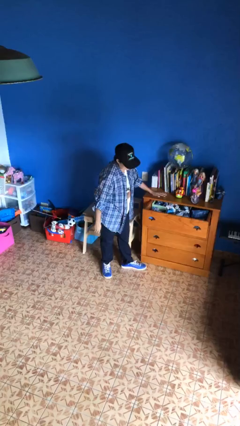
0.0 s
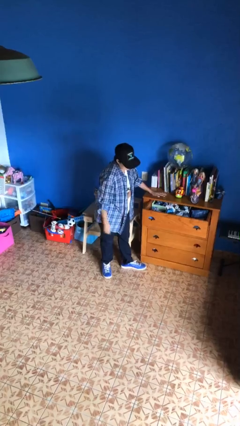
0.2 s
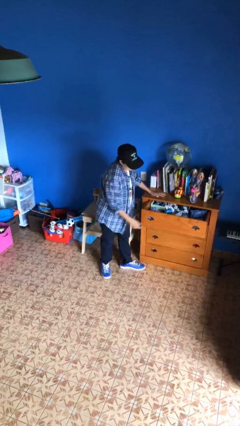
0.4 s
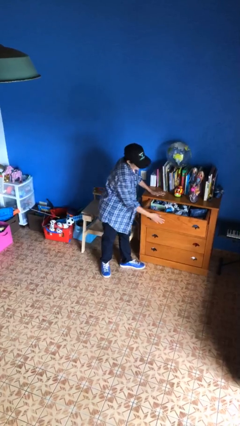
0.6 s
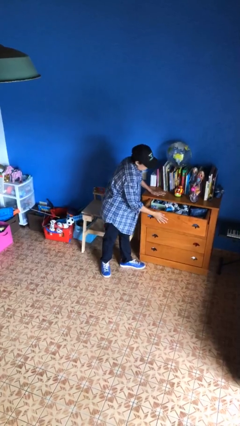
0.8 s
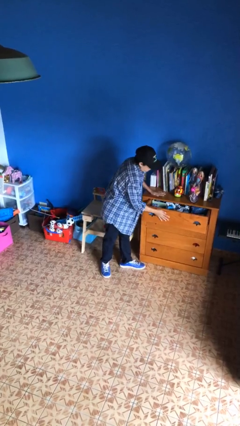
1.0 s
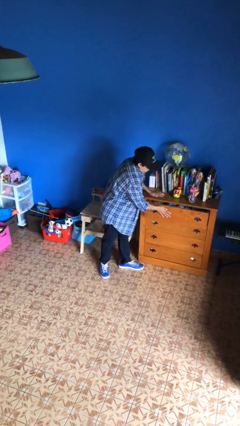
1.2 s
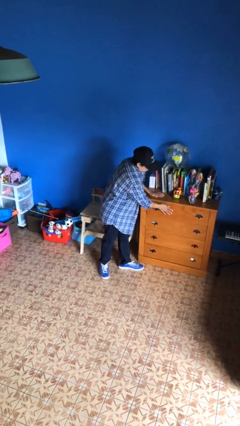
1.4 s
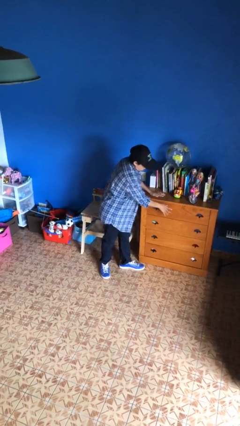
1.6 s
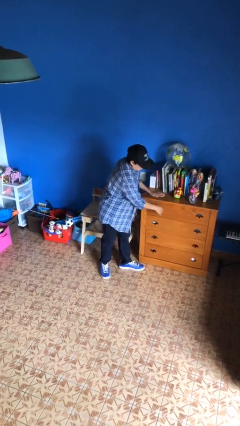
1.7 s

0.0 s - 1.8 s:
person closes dresser drawer

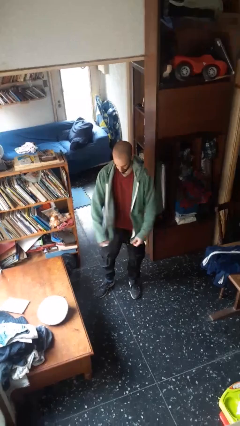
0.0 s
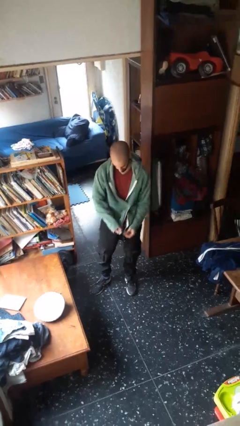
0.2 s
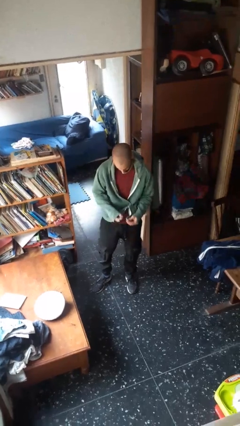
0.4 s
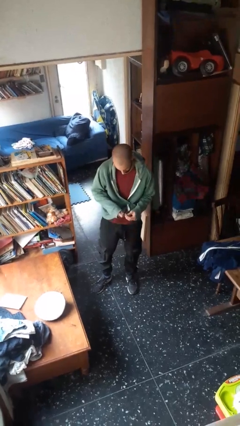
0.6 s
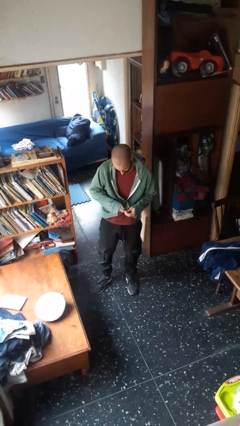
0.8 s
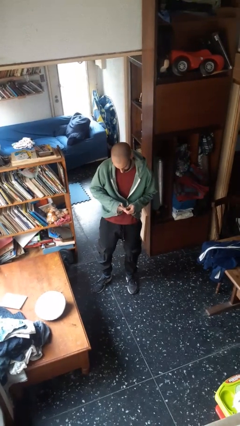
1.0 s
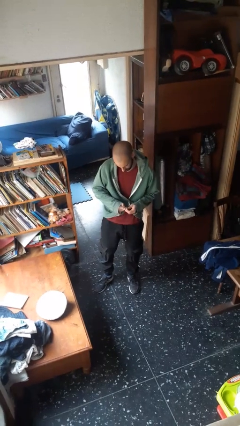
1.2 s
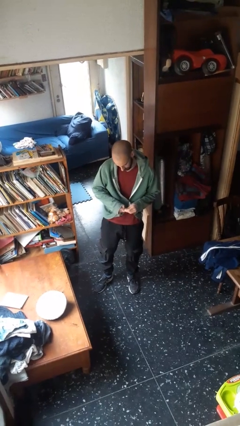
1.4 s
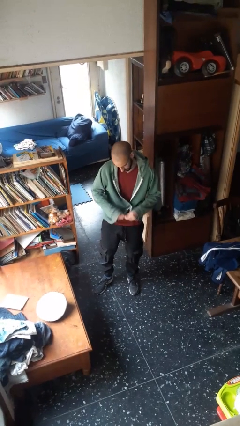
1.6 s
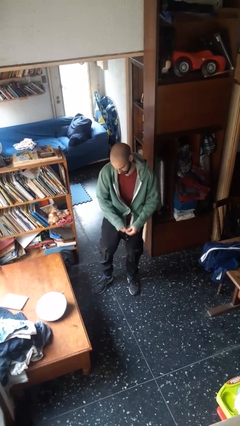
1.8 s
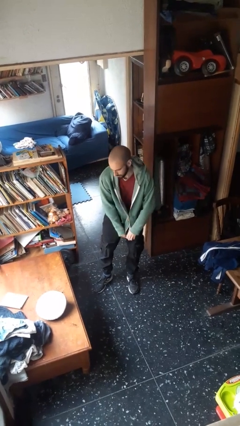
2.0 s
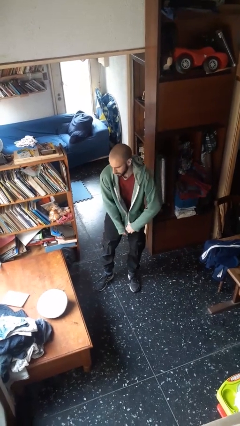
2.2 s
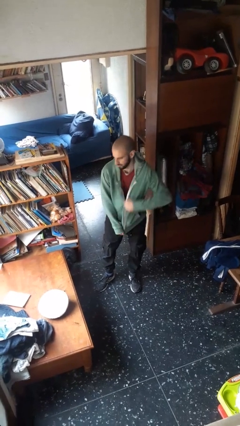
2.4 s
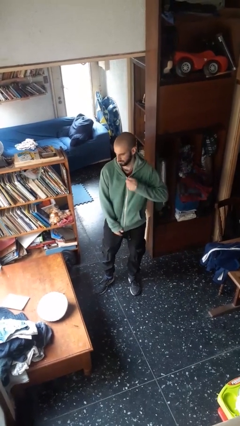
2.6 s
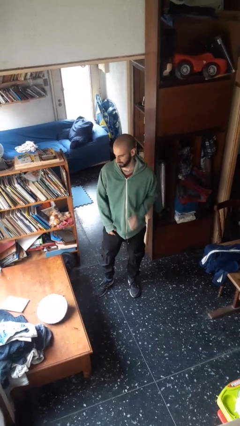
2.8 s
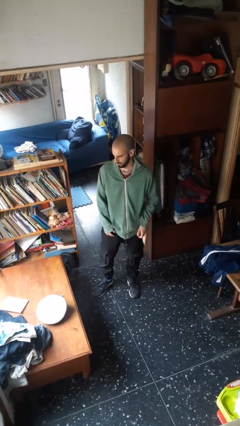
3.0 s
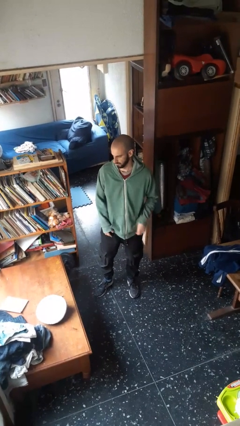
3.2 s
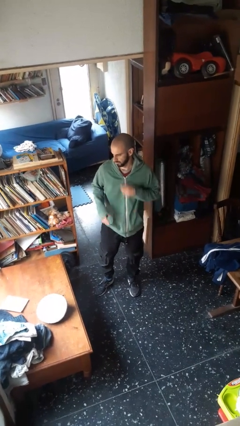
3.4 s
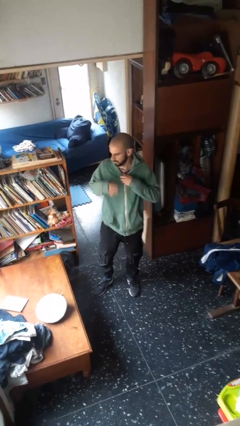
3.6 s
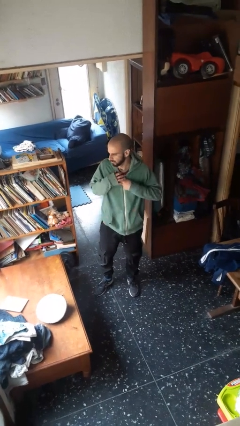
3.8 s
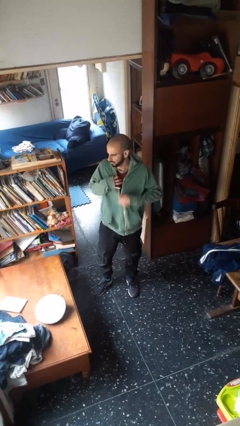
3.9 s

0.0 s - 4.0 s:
person zips up jacket

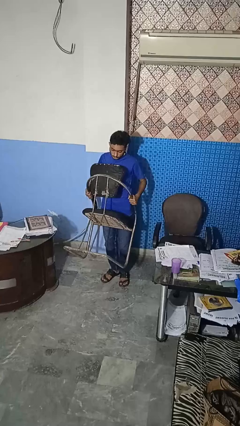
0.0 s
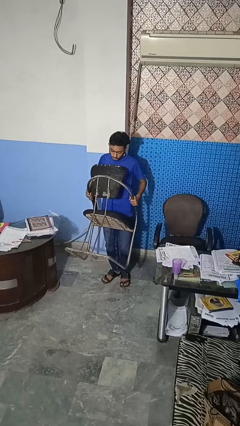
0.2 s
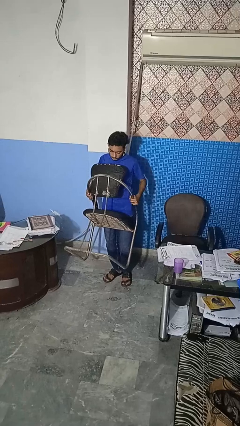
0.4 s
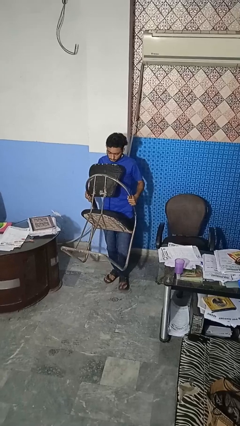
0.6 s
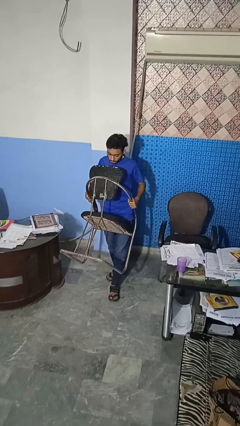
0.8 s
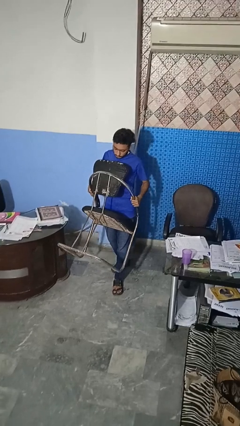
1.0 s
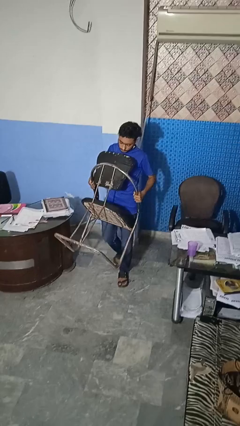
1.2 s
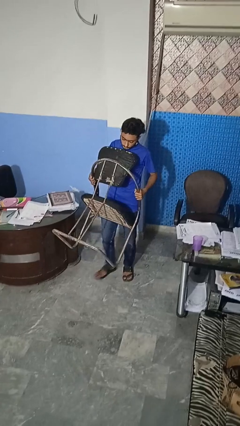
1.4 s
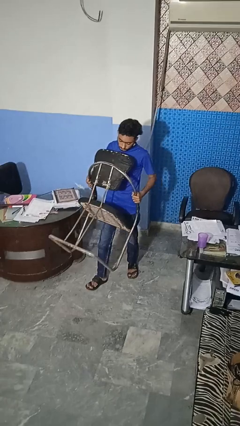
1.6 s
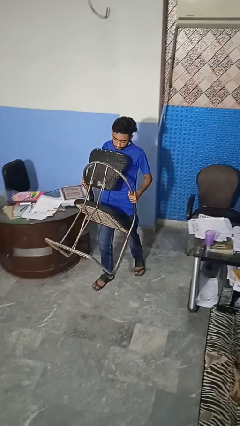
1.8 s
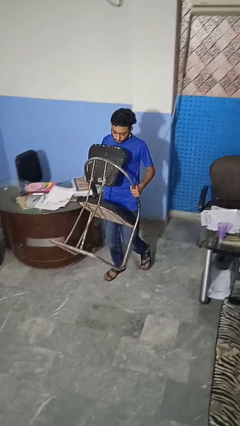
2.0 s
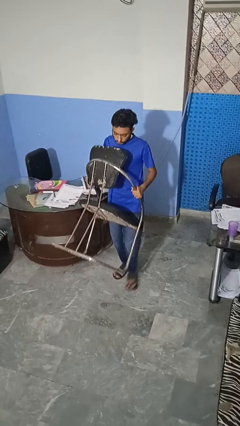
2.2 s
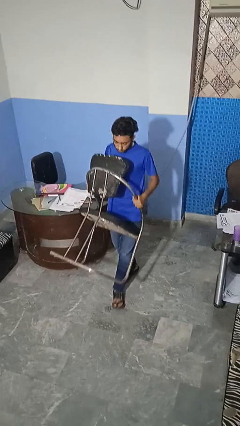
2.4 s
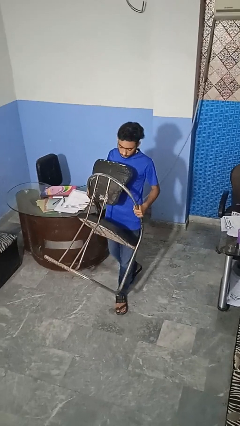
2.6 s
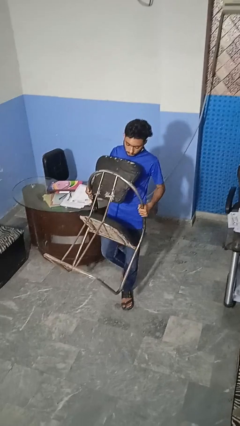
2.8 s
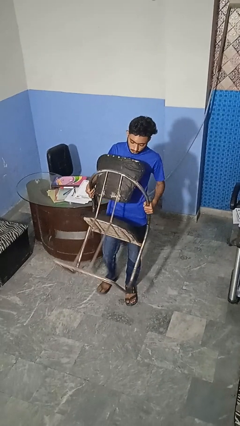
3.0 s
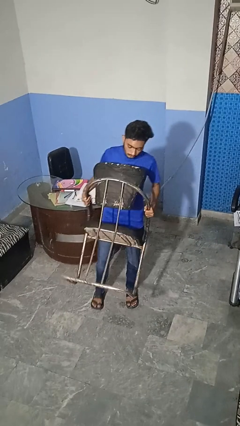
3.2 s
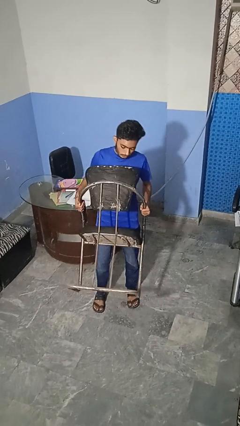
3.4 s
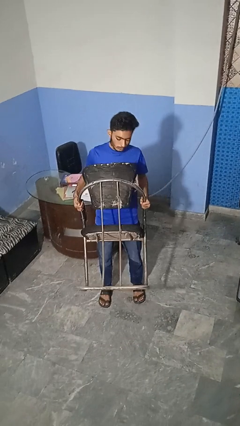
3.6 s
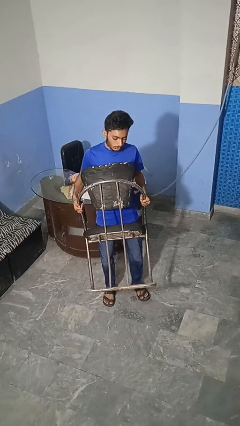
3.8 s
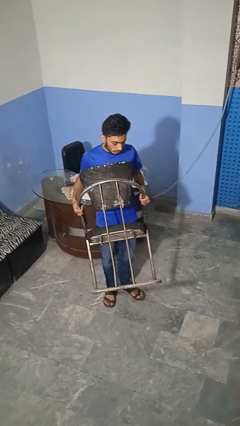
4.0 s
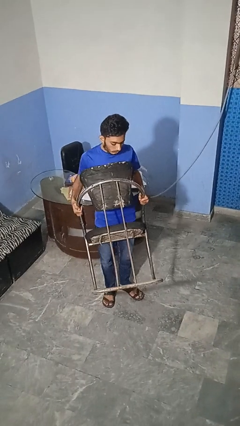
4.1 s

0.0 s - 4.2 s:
person carries furniture

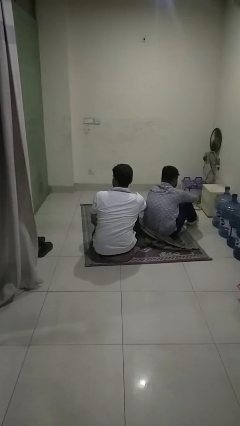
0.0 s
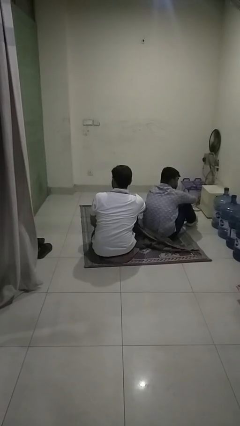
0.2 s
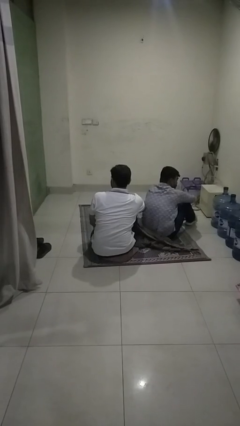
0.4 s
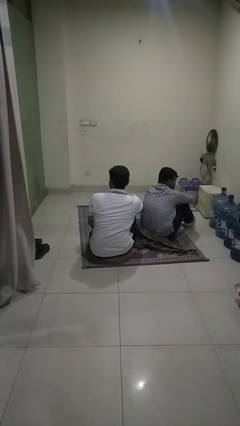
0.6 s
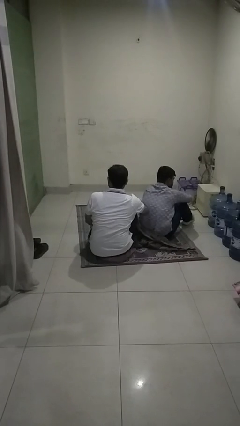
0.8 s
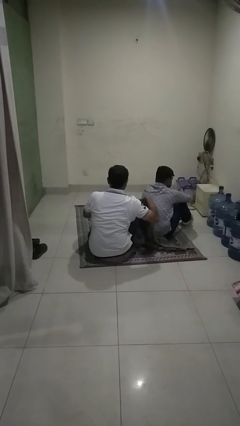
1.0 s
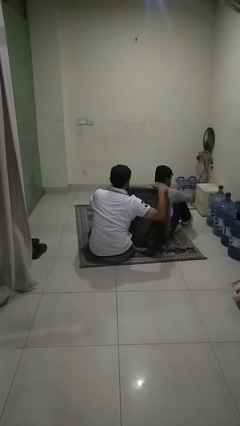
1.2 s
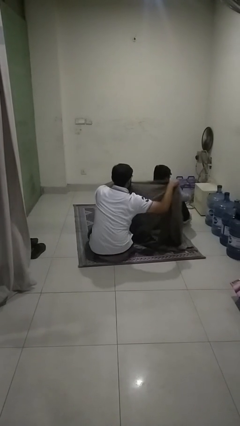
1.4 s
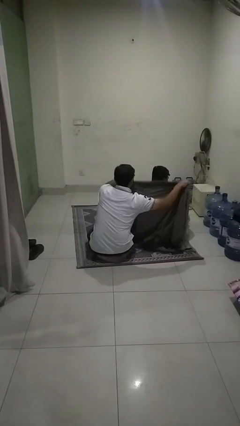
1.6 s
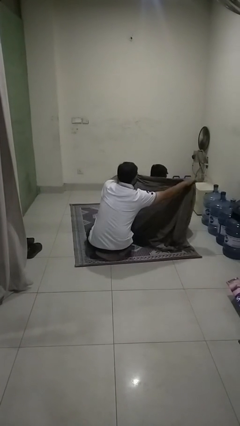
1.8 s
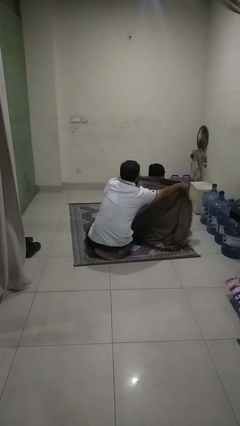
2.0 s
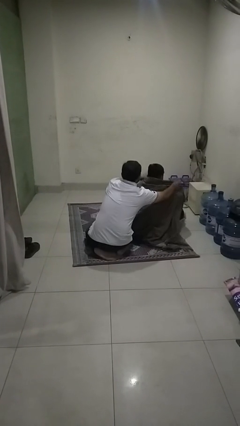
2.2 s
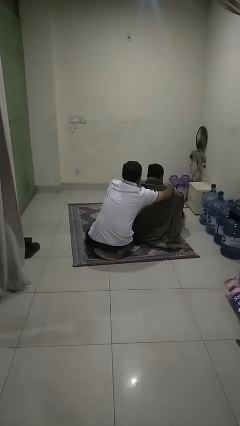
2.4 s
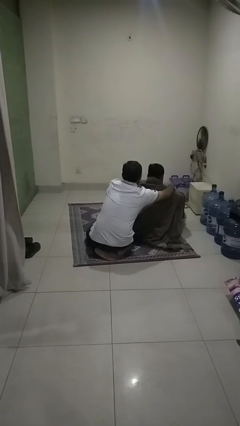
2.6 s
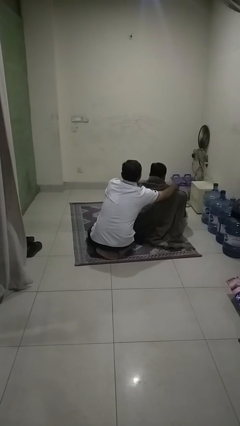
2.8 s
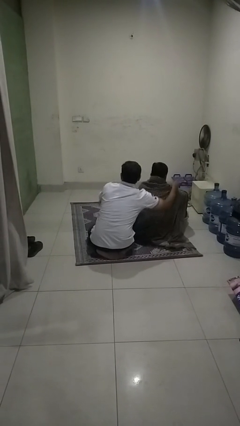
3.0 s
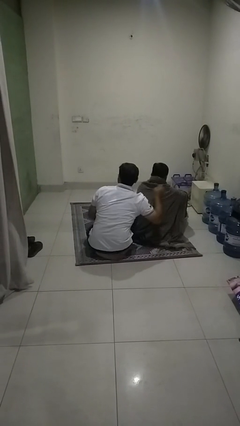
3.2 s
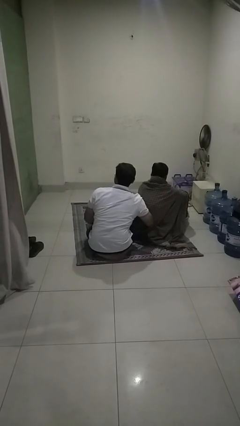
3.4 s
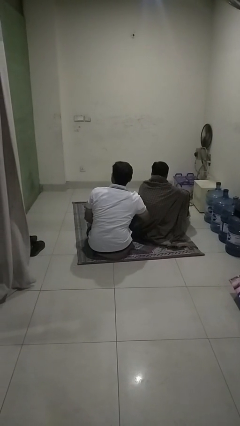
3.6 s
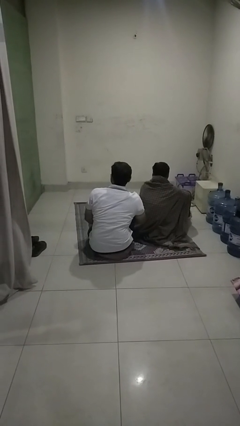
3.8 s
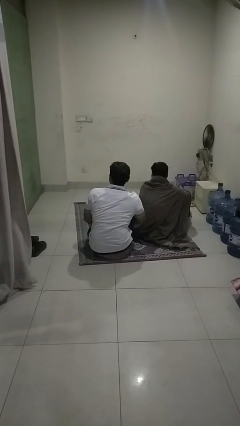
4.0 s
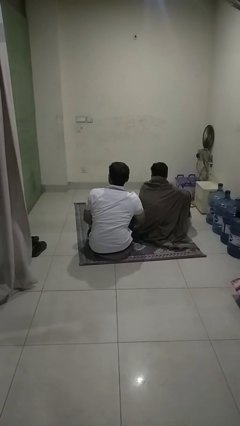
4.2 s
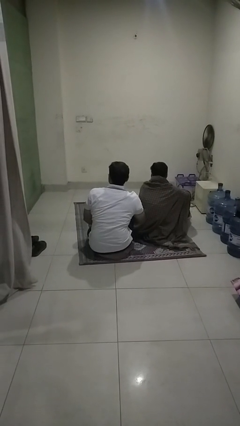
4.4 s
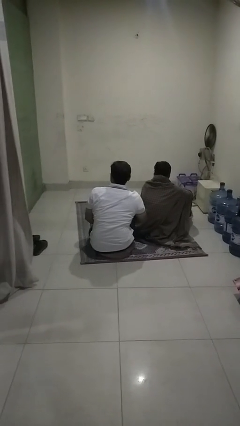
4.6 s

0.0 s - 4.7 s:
person covers friend with blanket

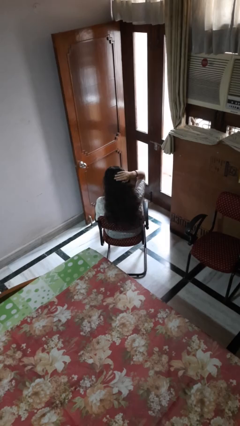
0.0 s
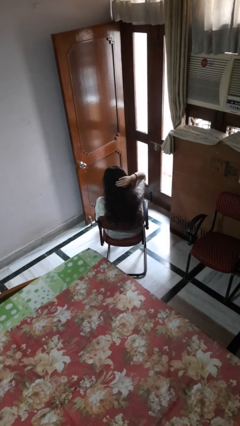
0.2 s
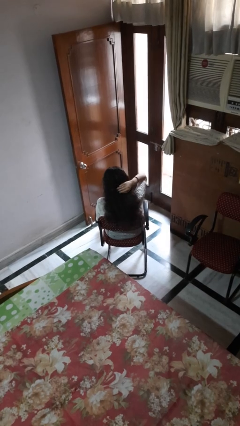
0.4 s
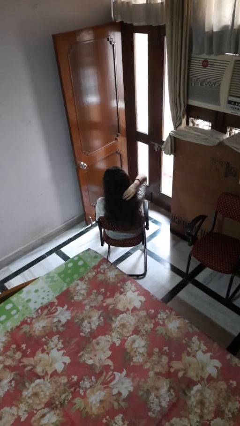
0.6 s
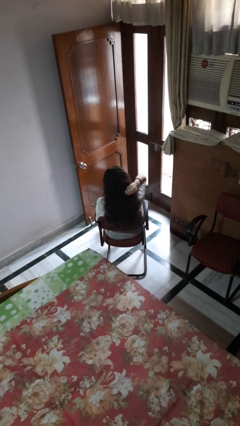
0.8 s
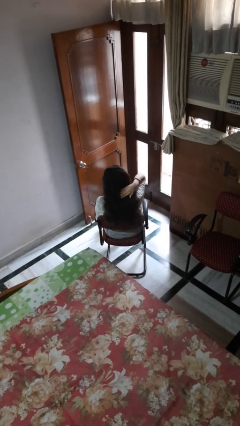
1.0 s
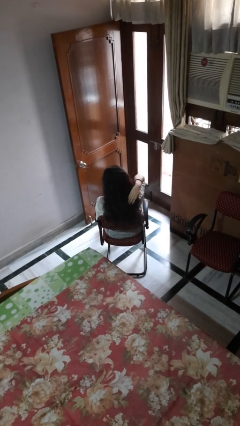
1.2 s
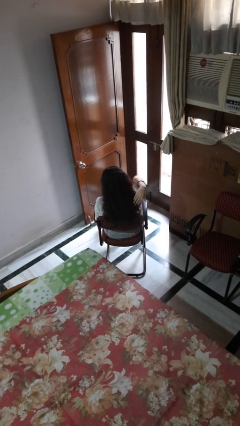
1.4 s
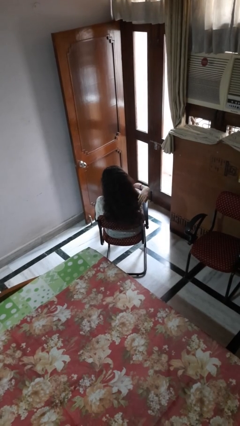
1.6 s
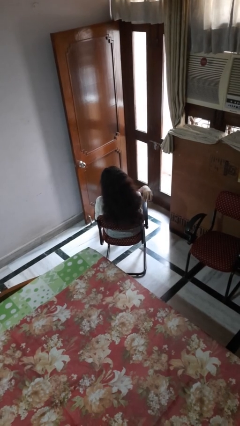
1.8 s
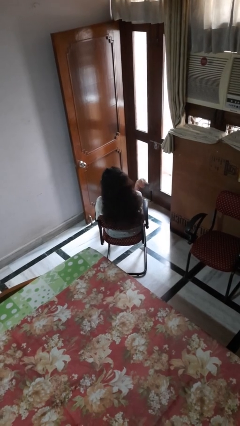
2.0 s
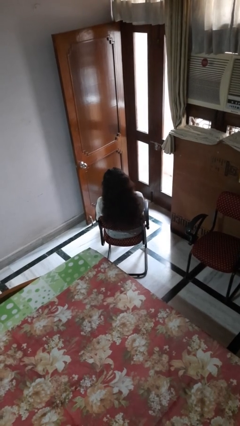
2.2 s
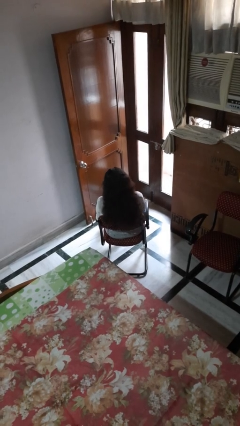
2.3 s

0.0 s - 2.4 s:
person strokes hair

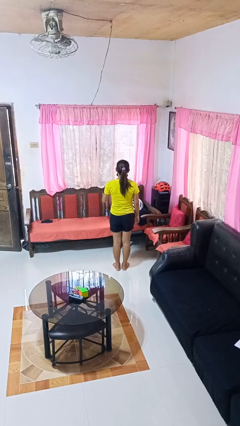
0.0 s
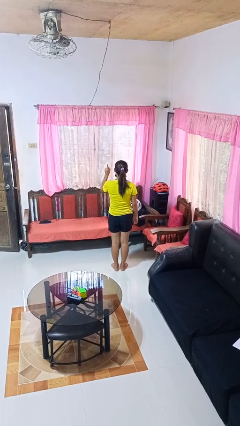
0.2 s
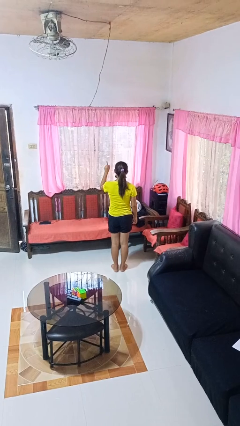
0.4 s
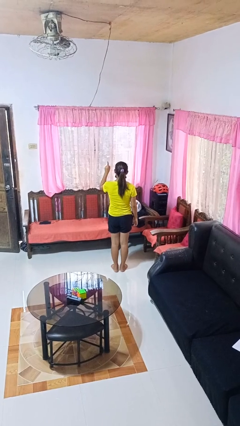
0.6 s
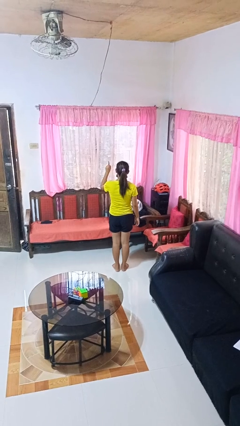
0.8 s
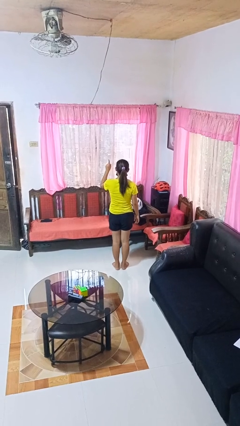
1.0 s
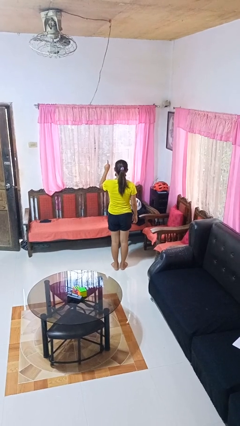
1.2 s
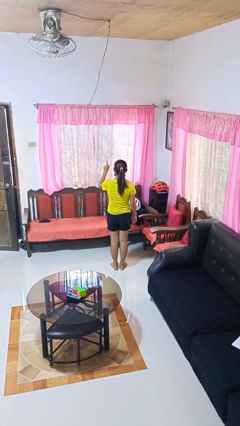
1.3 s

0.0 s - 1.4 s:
person gestures number one
